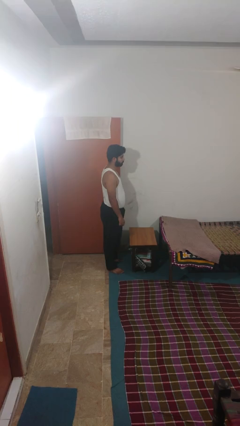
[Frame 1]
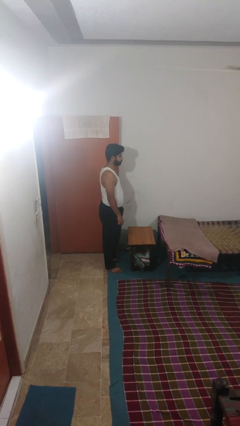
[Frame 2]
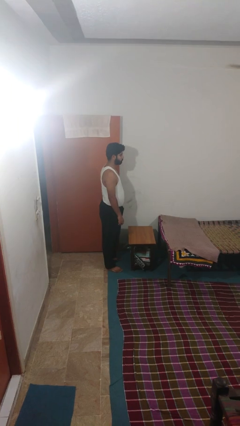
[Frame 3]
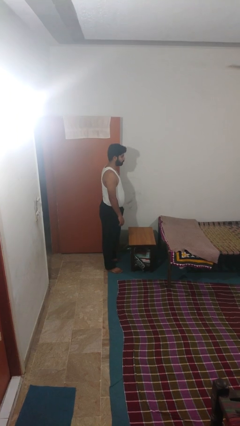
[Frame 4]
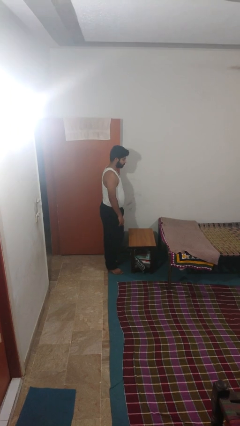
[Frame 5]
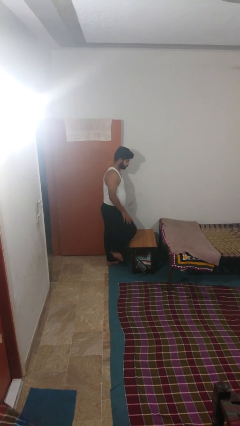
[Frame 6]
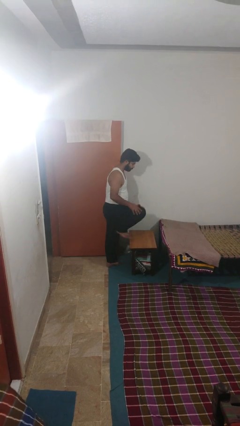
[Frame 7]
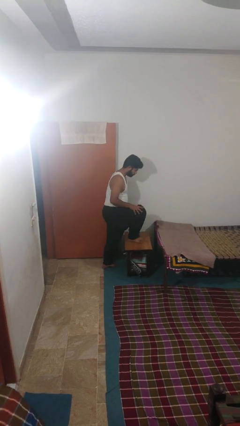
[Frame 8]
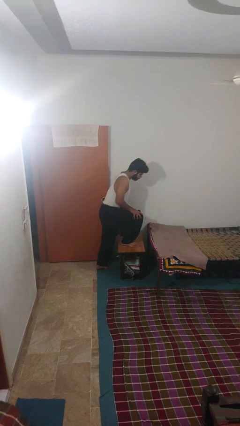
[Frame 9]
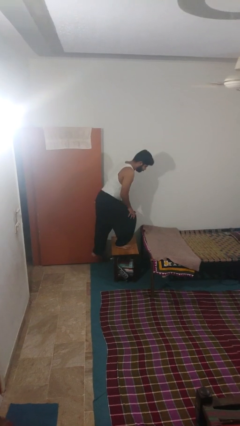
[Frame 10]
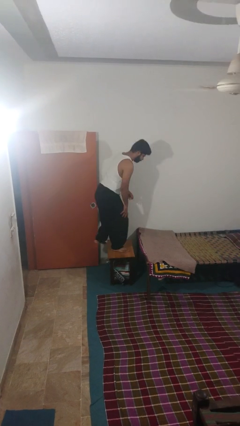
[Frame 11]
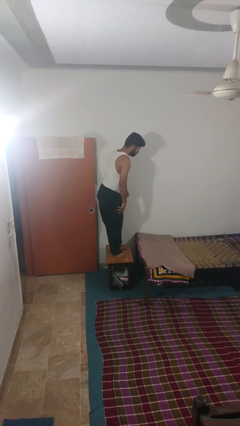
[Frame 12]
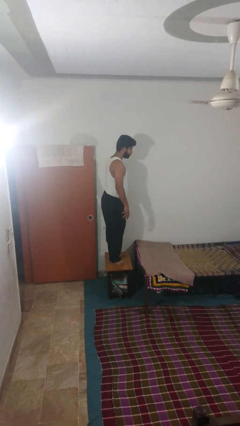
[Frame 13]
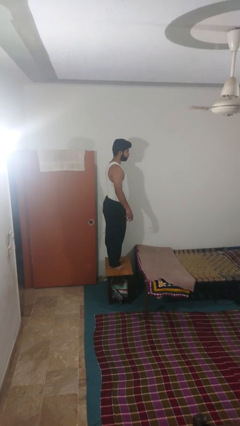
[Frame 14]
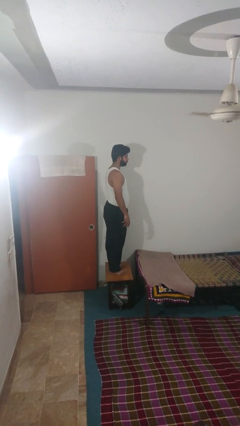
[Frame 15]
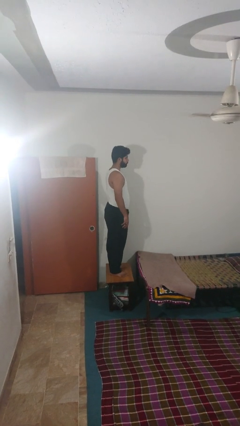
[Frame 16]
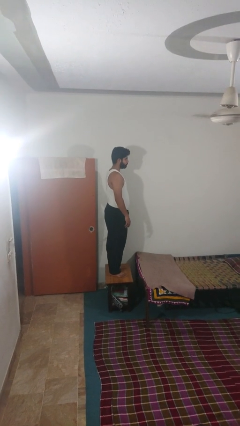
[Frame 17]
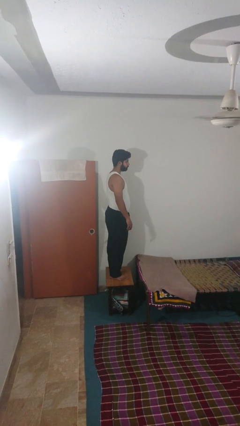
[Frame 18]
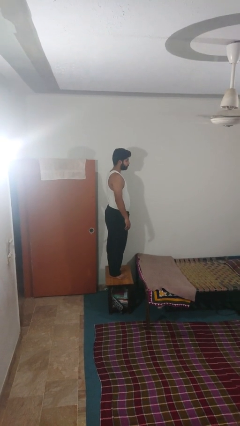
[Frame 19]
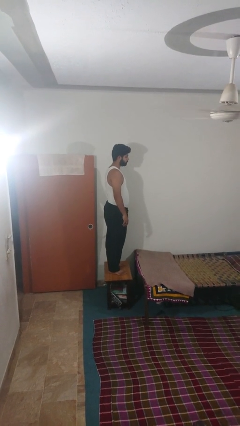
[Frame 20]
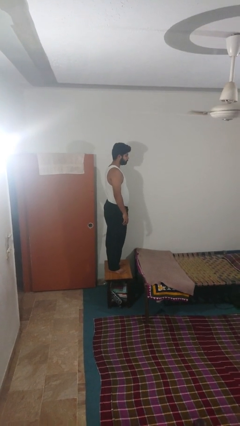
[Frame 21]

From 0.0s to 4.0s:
person climbs on table

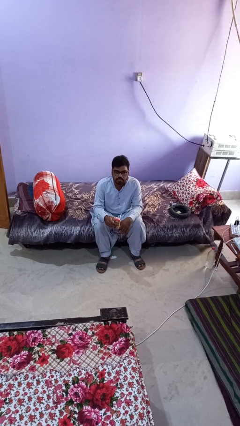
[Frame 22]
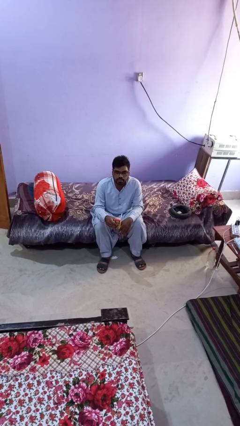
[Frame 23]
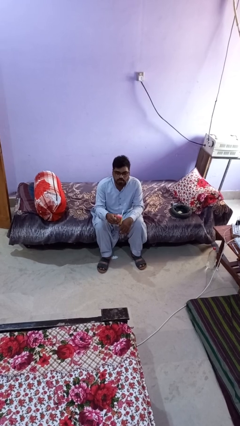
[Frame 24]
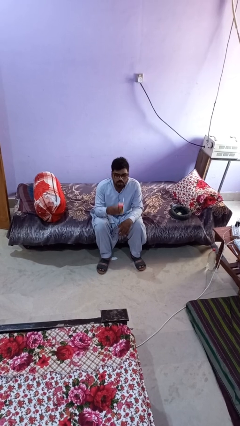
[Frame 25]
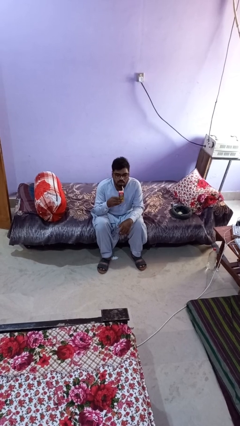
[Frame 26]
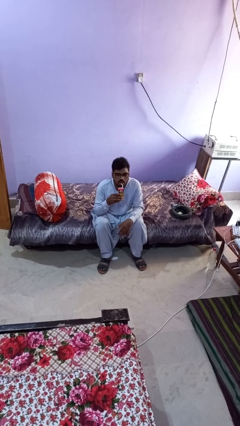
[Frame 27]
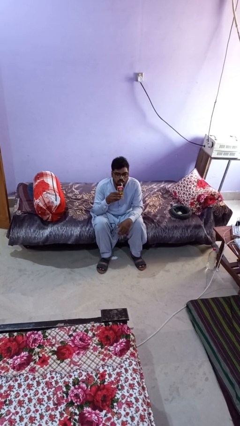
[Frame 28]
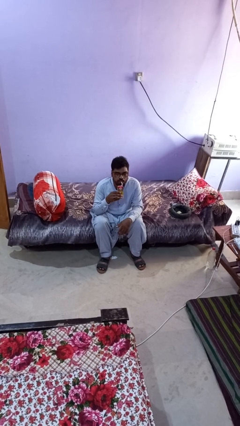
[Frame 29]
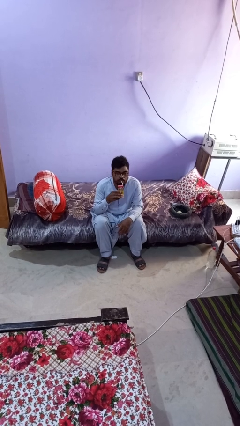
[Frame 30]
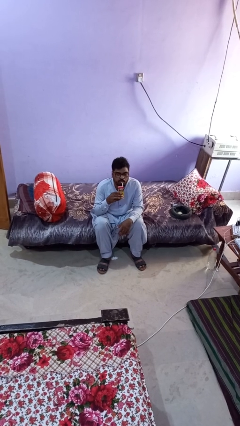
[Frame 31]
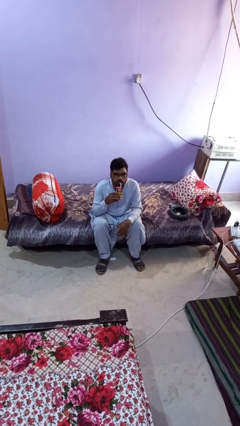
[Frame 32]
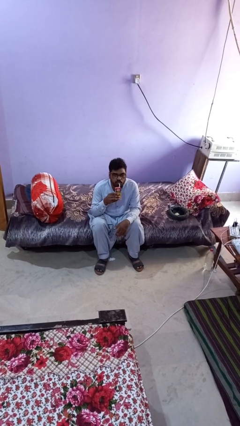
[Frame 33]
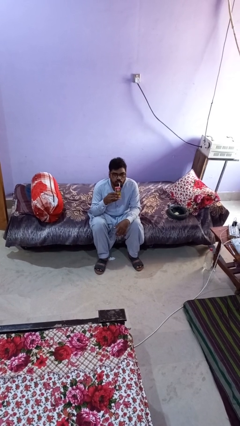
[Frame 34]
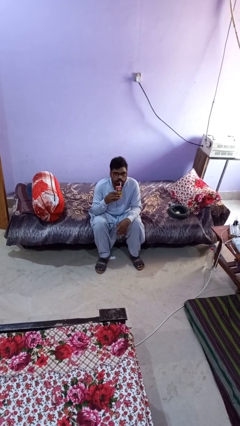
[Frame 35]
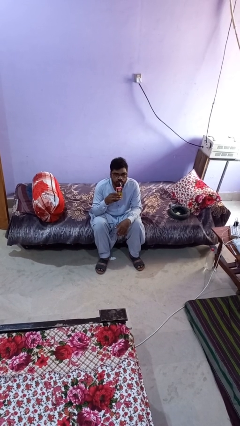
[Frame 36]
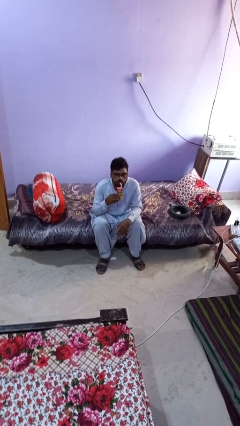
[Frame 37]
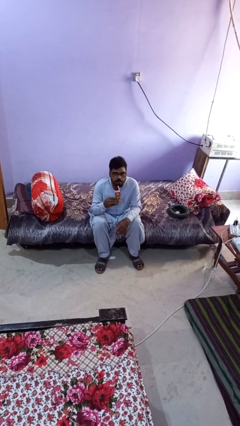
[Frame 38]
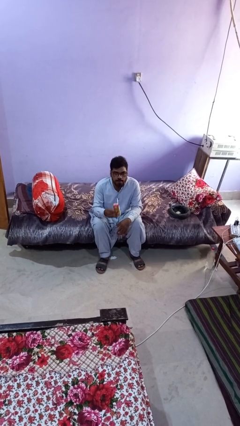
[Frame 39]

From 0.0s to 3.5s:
person drinks from straw

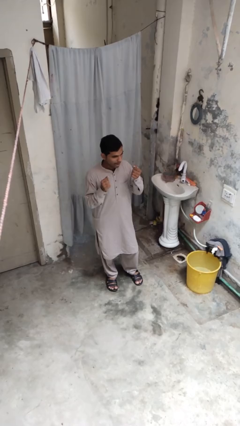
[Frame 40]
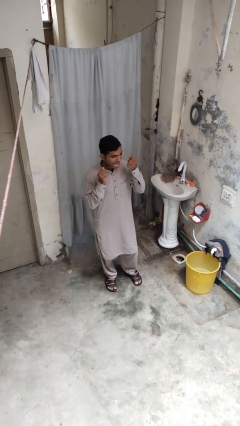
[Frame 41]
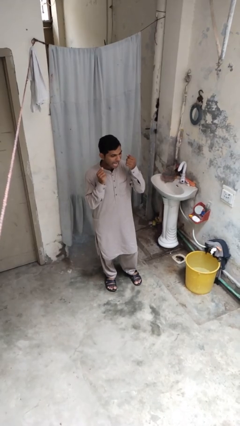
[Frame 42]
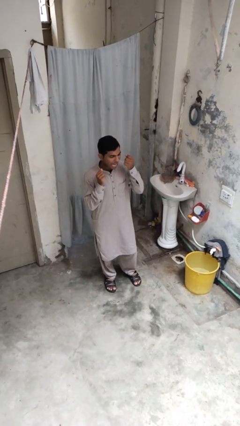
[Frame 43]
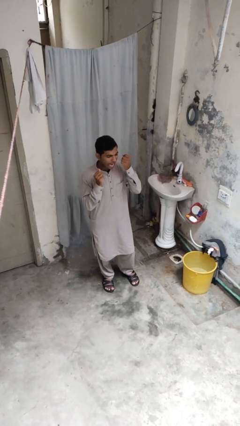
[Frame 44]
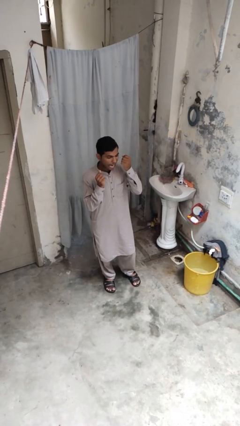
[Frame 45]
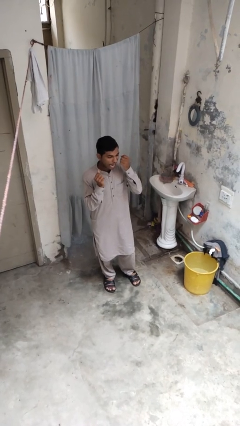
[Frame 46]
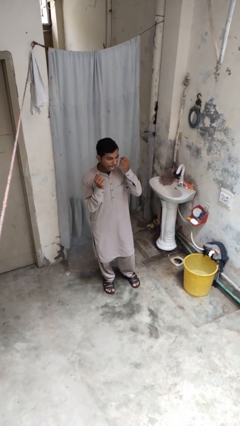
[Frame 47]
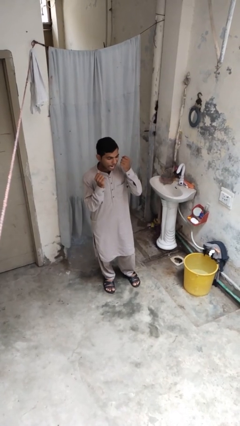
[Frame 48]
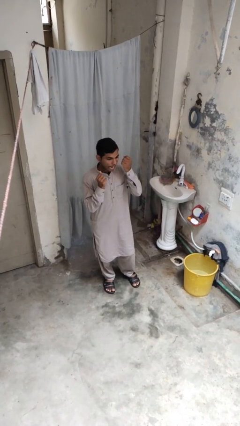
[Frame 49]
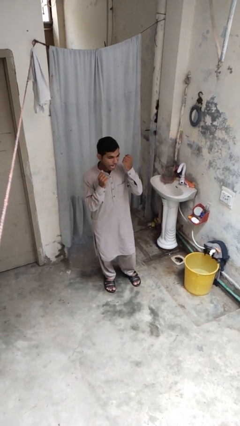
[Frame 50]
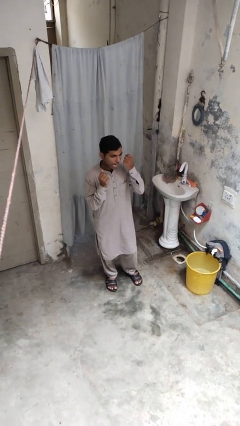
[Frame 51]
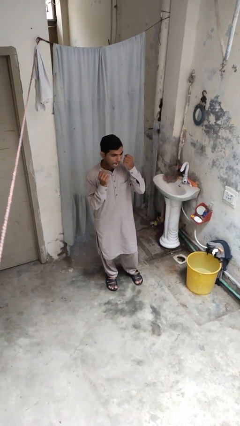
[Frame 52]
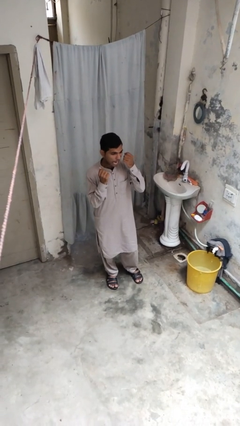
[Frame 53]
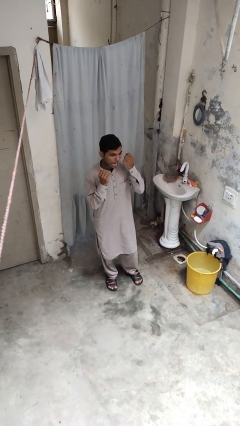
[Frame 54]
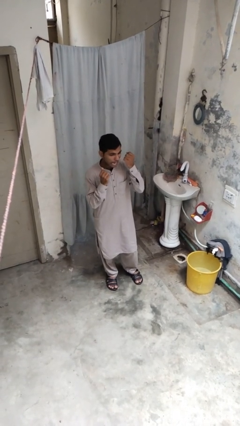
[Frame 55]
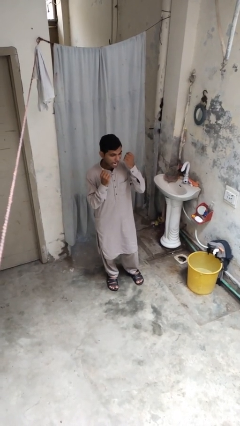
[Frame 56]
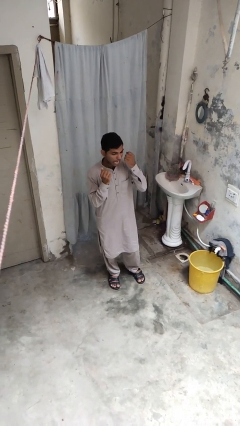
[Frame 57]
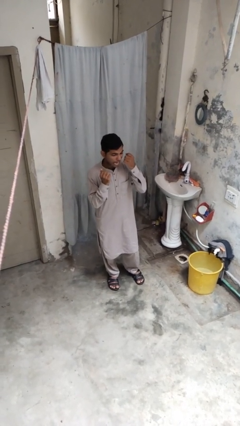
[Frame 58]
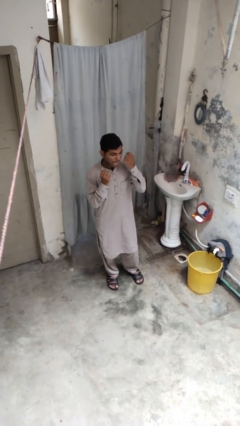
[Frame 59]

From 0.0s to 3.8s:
person flosses

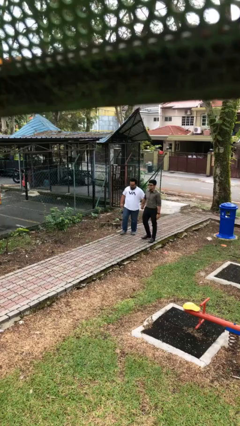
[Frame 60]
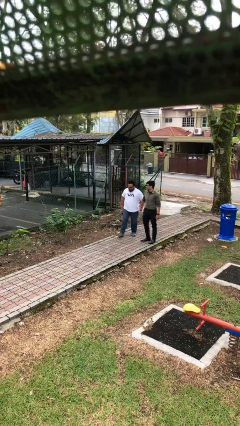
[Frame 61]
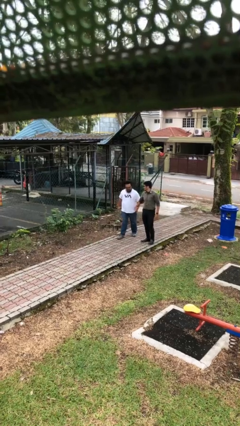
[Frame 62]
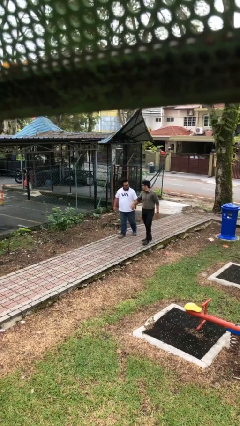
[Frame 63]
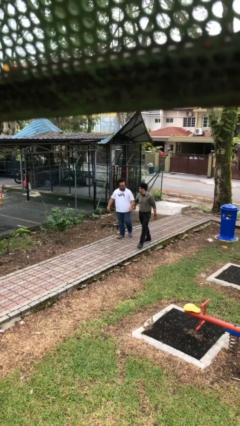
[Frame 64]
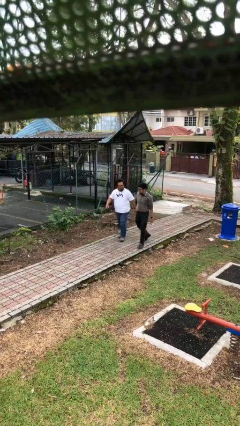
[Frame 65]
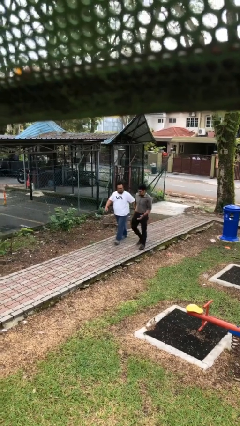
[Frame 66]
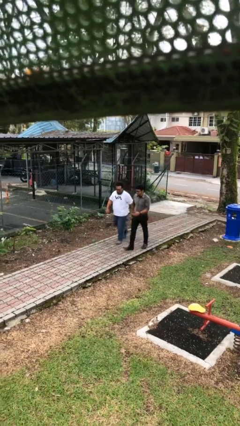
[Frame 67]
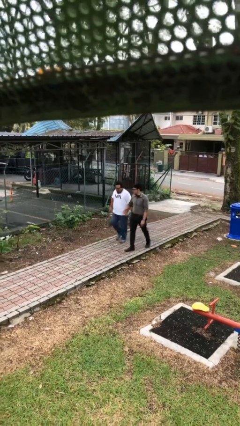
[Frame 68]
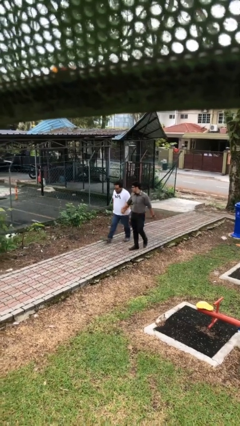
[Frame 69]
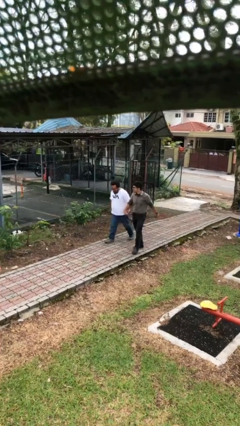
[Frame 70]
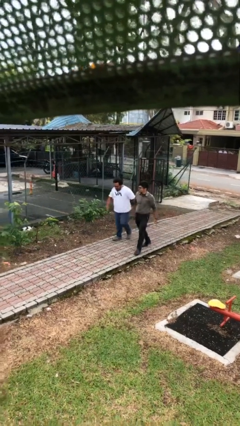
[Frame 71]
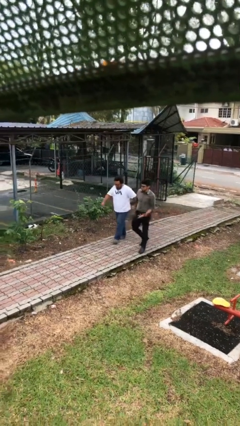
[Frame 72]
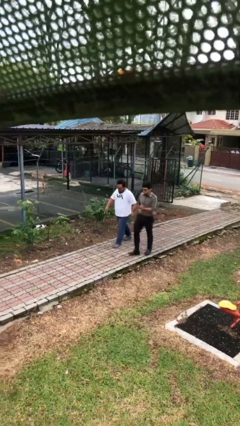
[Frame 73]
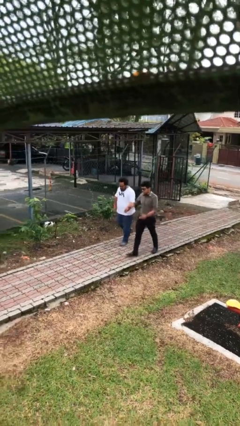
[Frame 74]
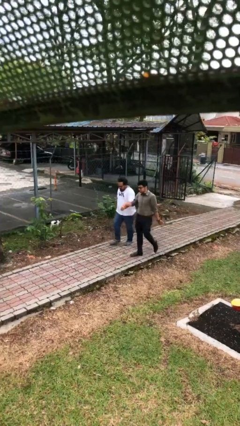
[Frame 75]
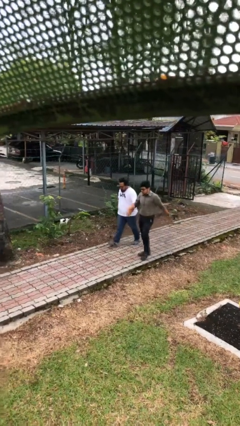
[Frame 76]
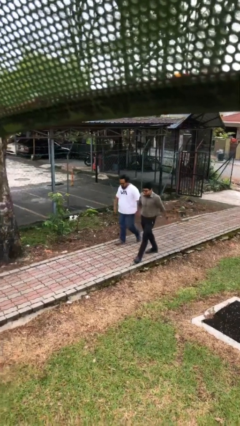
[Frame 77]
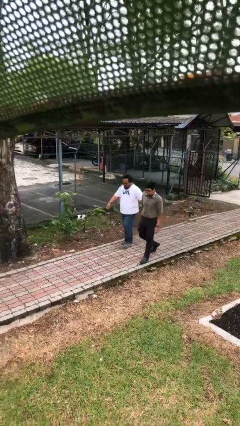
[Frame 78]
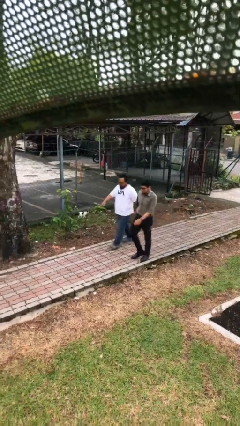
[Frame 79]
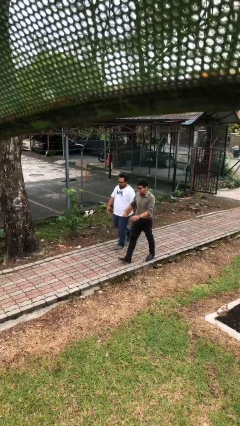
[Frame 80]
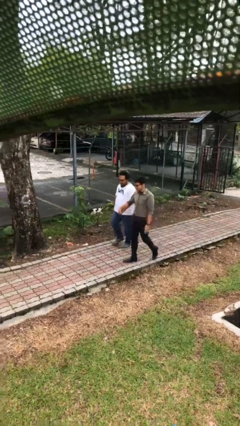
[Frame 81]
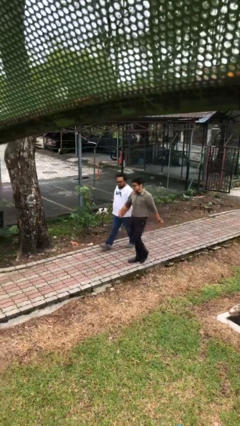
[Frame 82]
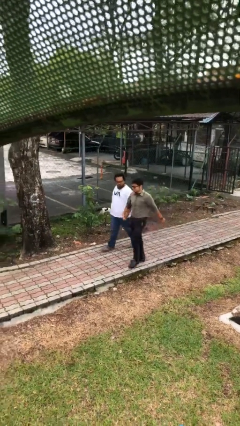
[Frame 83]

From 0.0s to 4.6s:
person holds hand

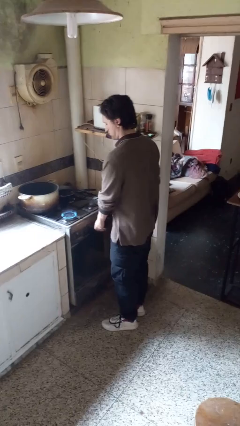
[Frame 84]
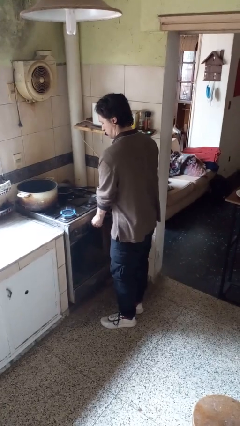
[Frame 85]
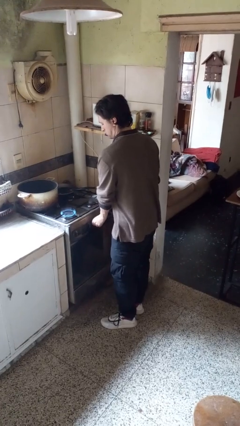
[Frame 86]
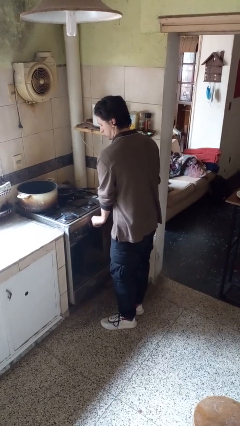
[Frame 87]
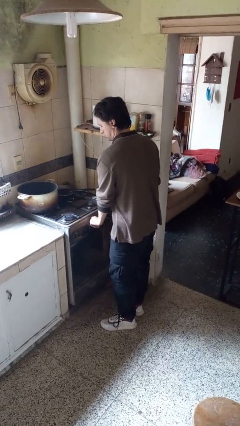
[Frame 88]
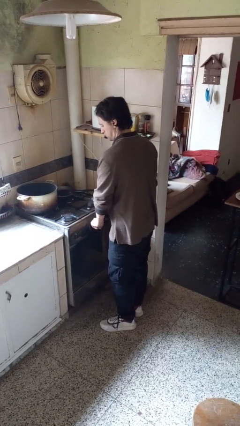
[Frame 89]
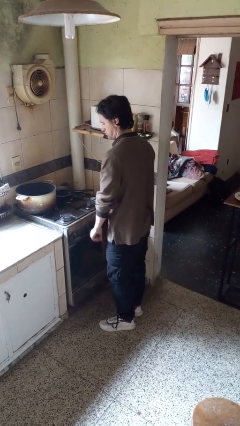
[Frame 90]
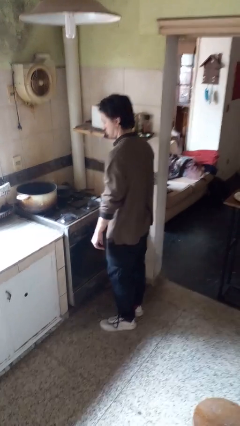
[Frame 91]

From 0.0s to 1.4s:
person turns off stovetop

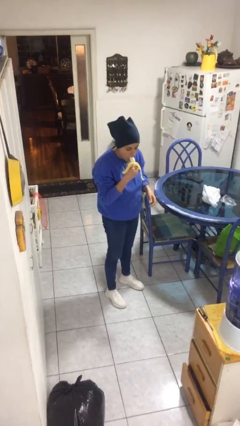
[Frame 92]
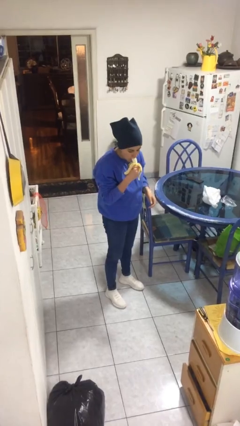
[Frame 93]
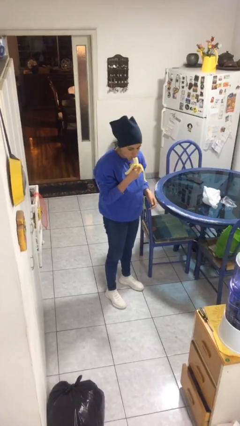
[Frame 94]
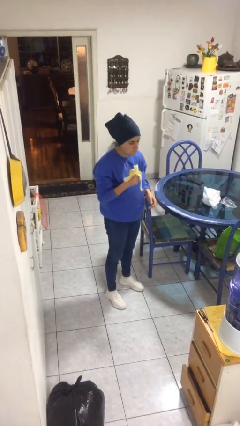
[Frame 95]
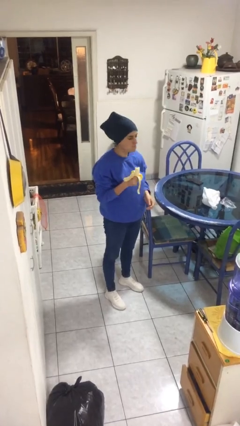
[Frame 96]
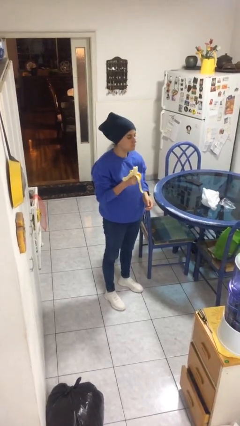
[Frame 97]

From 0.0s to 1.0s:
person eats banana
